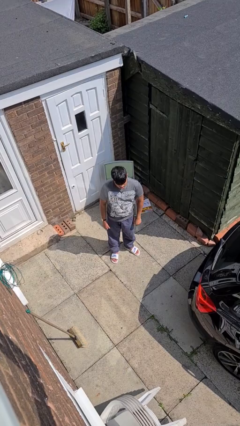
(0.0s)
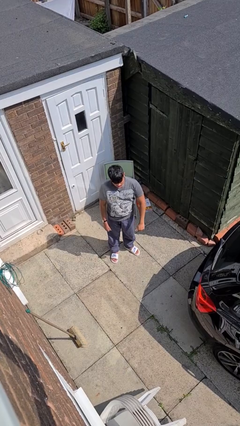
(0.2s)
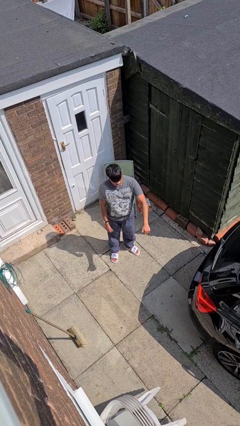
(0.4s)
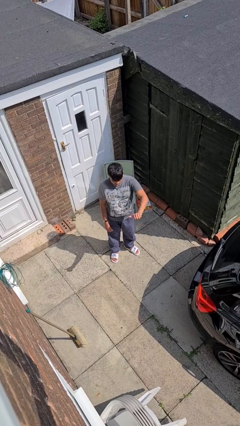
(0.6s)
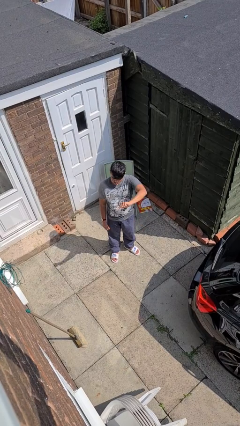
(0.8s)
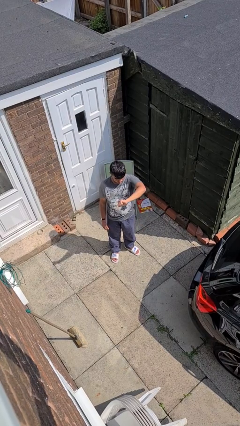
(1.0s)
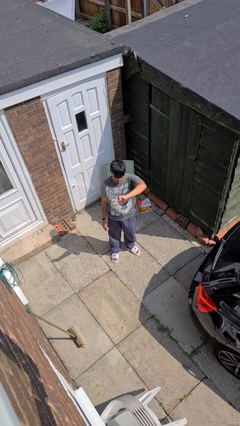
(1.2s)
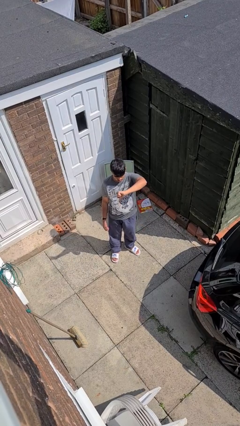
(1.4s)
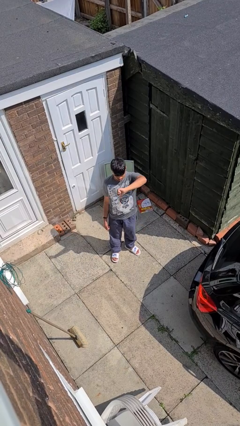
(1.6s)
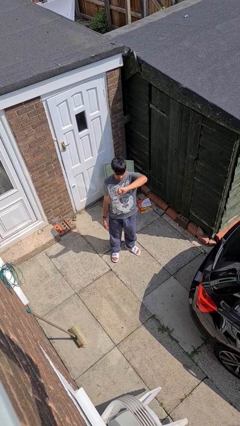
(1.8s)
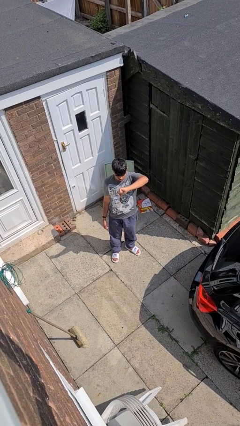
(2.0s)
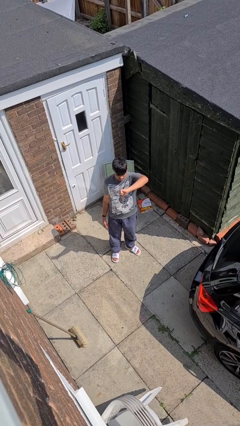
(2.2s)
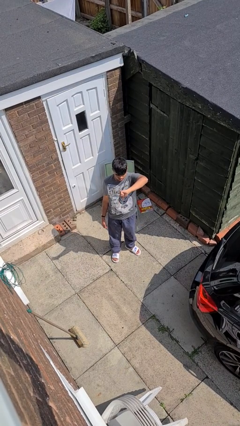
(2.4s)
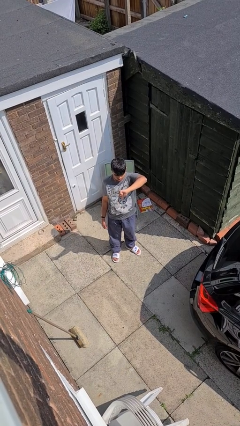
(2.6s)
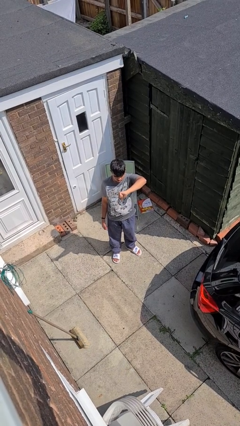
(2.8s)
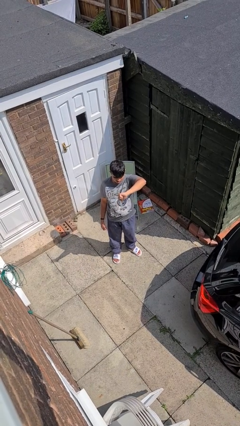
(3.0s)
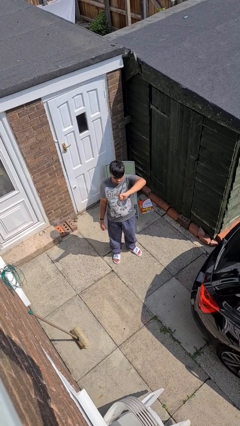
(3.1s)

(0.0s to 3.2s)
person gestures thumbs down

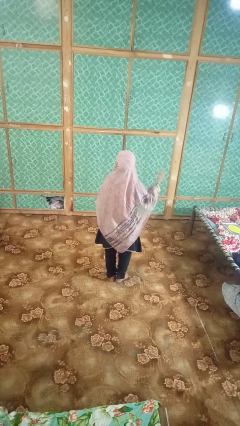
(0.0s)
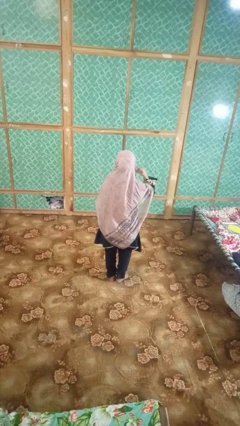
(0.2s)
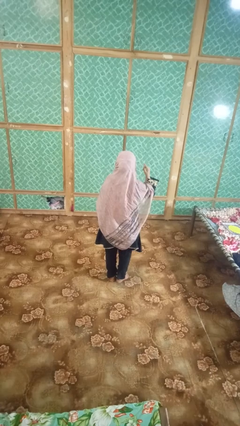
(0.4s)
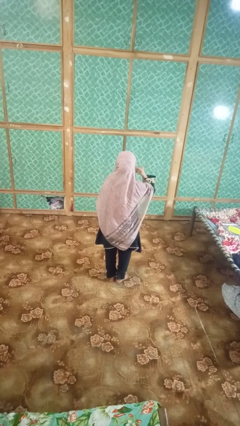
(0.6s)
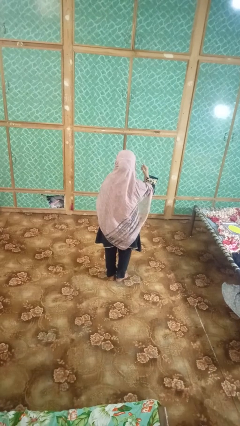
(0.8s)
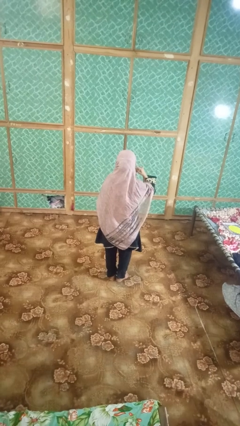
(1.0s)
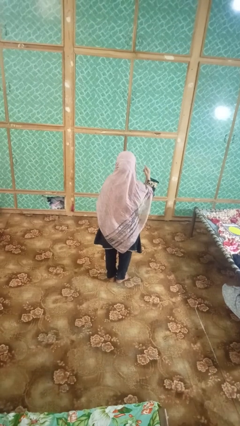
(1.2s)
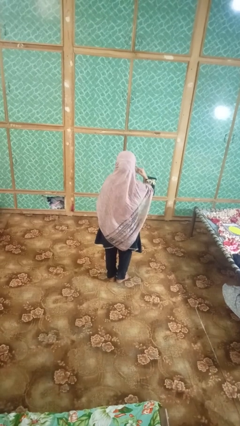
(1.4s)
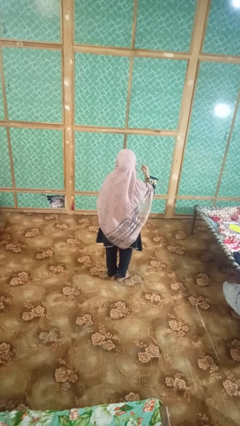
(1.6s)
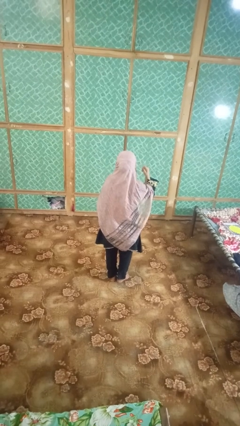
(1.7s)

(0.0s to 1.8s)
person gestures listen closely

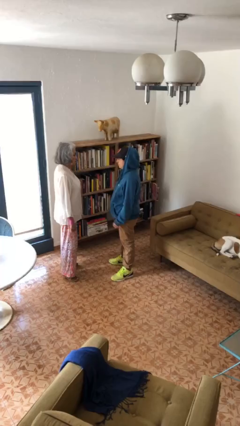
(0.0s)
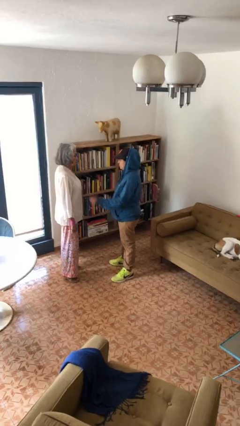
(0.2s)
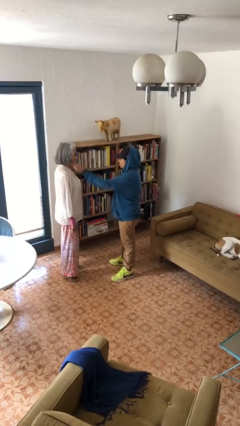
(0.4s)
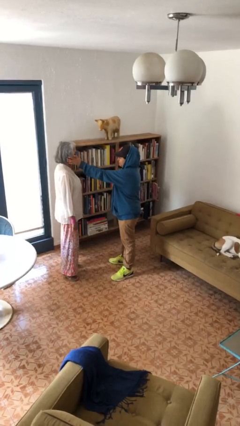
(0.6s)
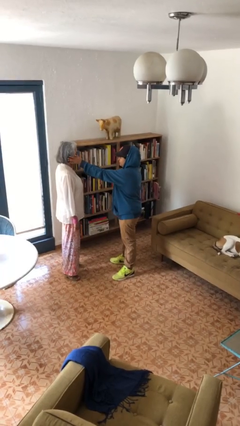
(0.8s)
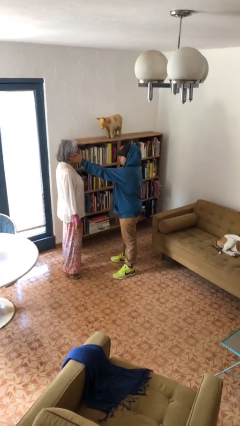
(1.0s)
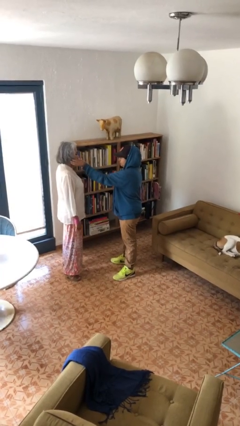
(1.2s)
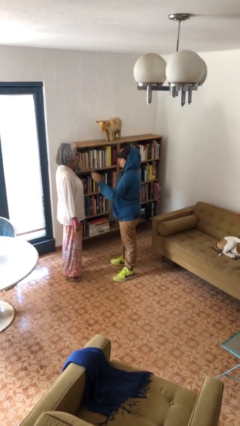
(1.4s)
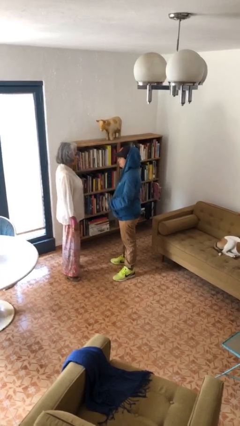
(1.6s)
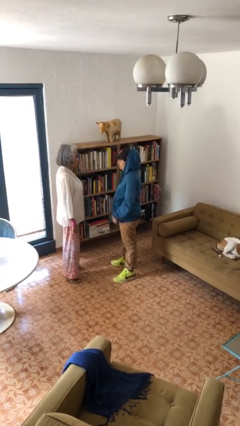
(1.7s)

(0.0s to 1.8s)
person touches face of person

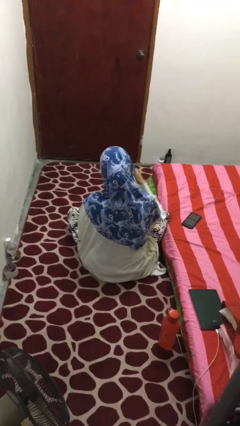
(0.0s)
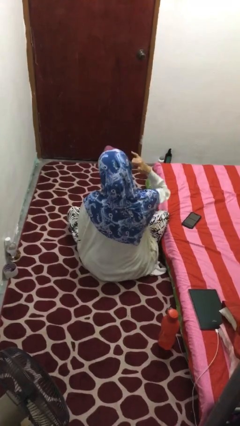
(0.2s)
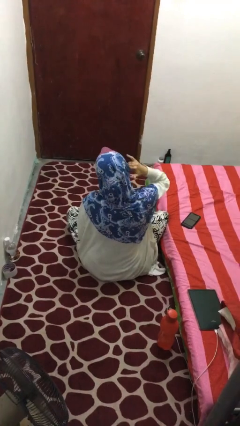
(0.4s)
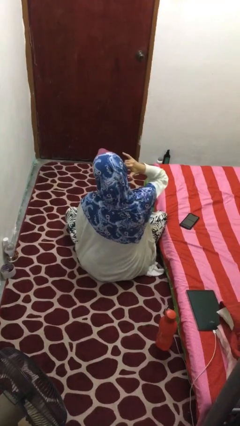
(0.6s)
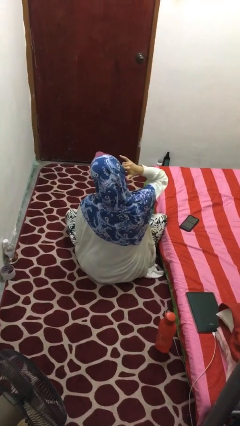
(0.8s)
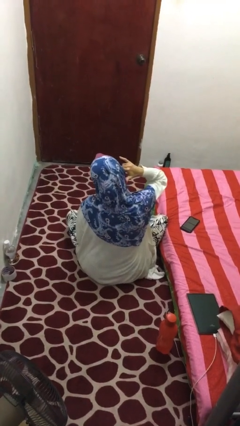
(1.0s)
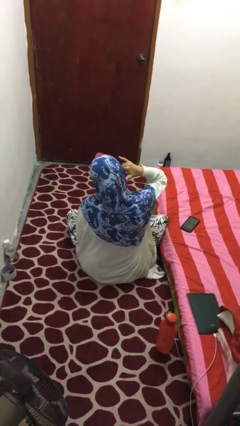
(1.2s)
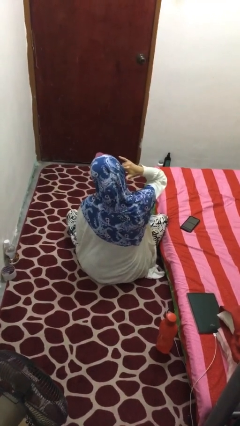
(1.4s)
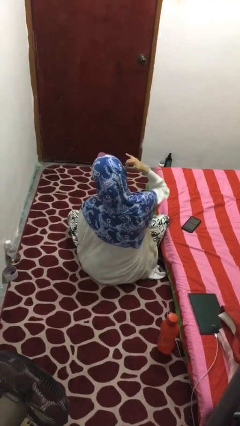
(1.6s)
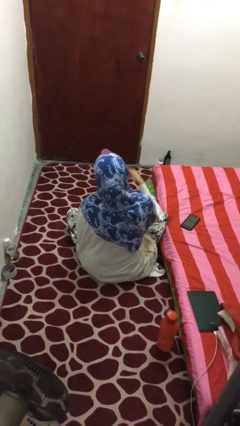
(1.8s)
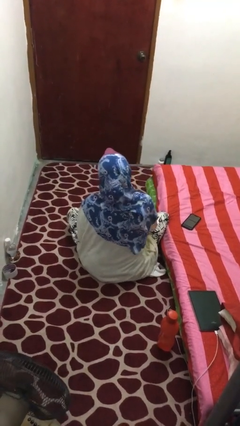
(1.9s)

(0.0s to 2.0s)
person gestures call me

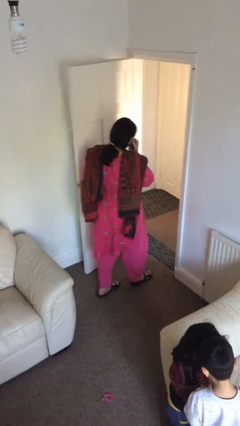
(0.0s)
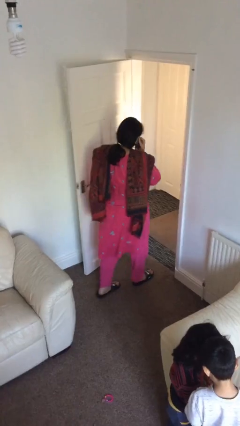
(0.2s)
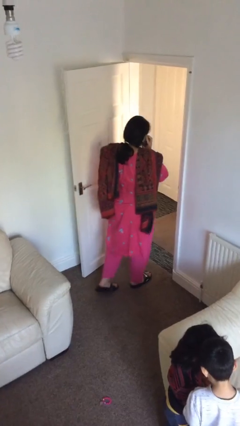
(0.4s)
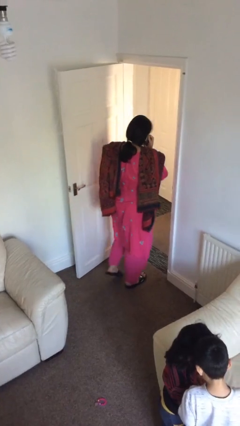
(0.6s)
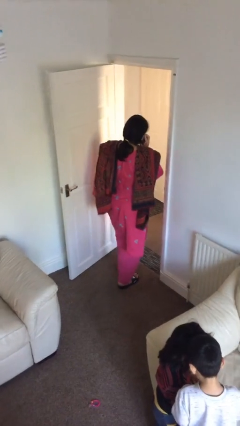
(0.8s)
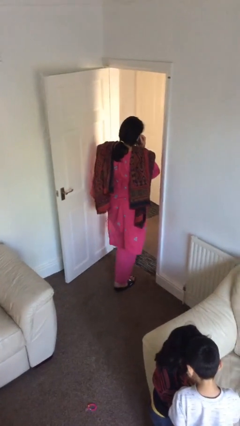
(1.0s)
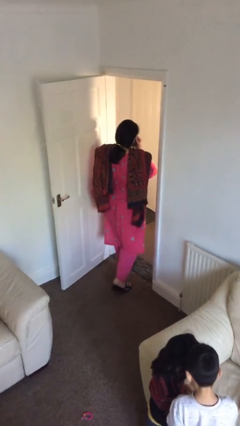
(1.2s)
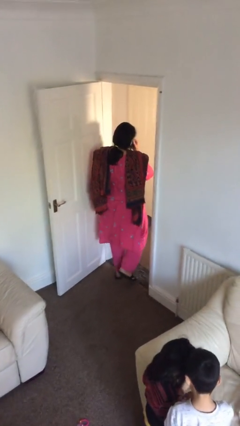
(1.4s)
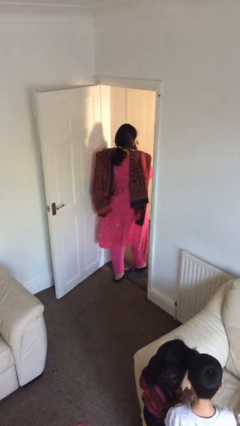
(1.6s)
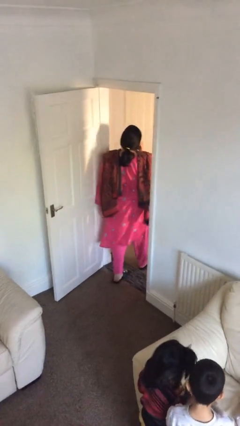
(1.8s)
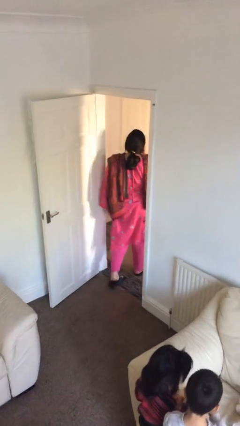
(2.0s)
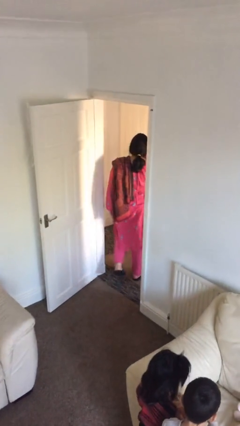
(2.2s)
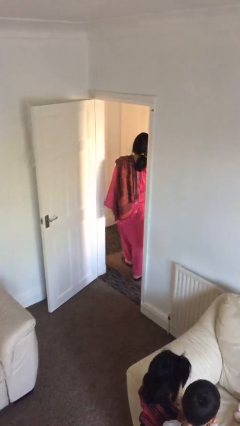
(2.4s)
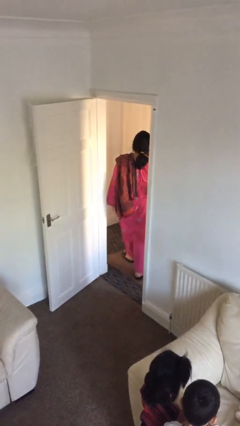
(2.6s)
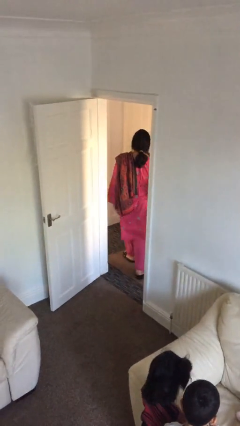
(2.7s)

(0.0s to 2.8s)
person exits scene through structure

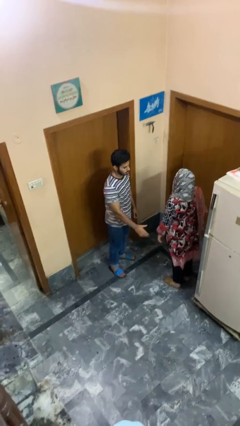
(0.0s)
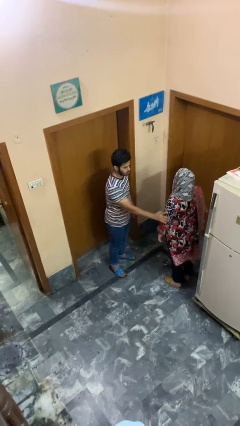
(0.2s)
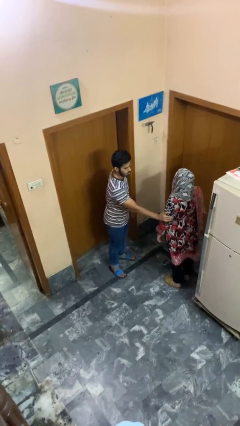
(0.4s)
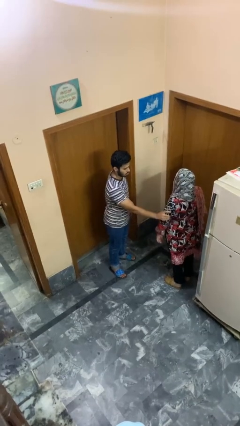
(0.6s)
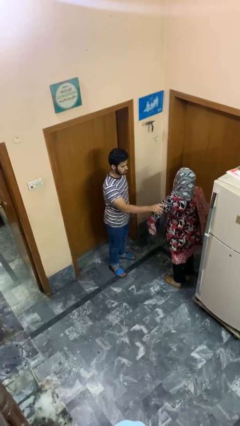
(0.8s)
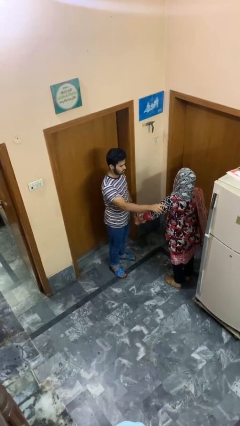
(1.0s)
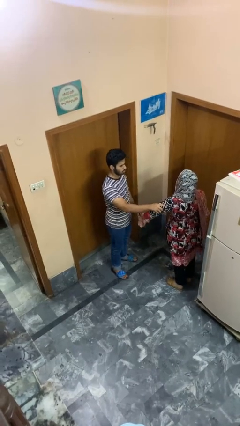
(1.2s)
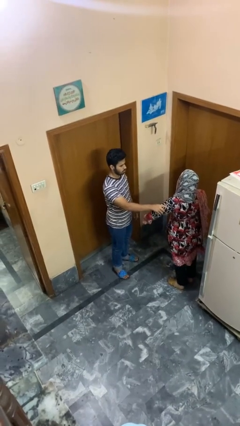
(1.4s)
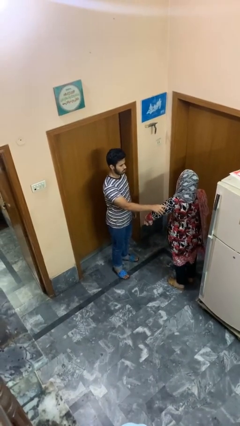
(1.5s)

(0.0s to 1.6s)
person grabs person by bicep

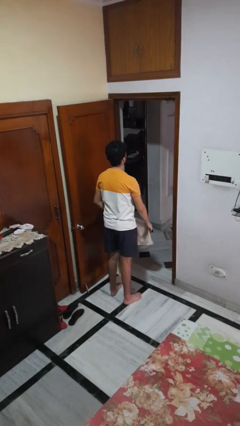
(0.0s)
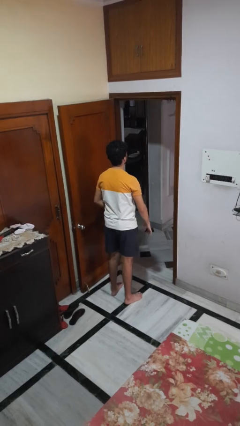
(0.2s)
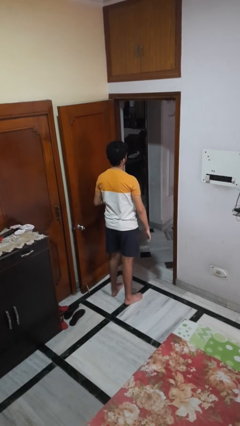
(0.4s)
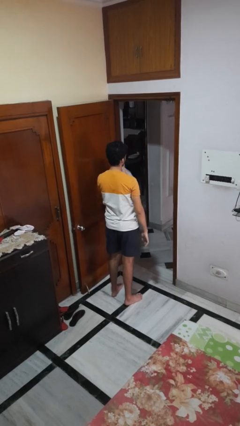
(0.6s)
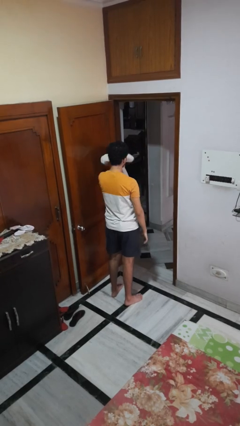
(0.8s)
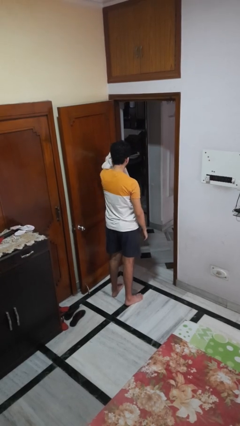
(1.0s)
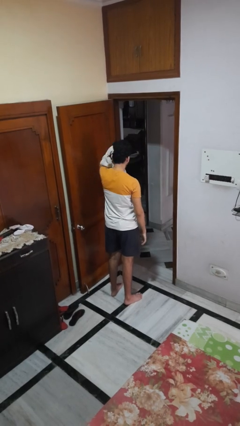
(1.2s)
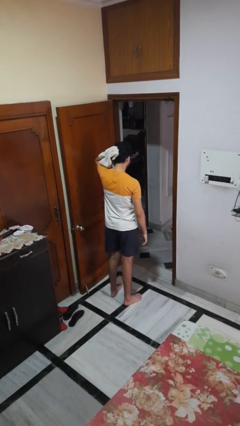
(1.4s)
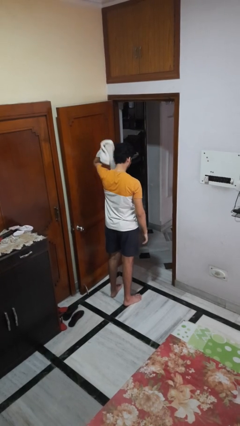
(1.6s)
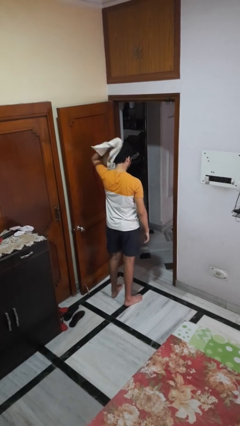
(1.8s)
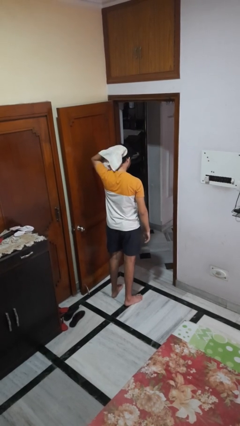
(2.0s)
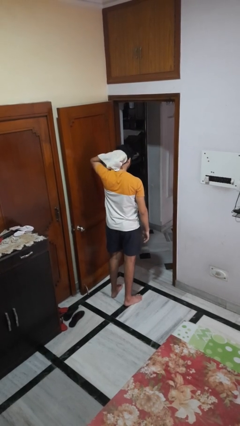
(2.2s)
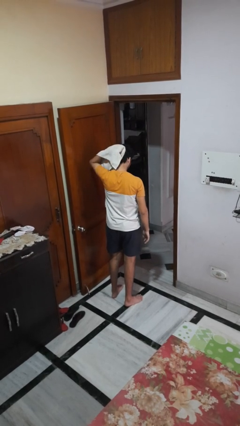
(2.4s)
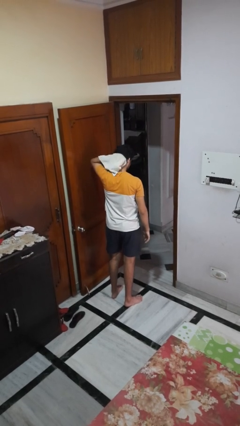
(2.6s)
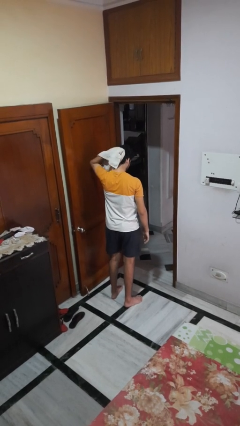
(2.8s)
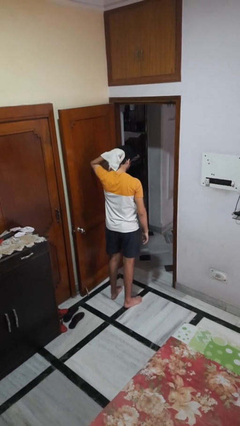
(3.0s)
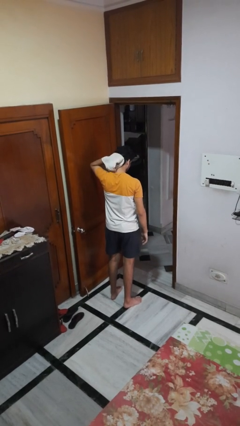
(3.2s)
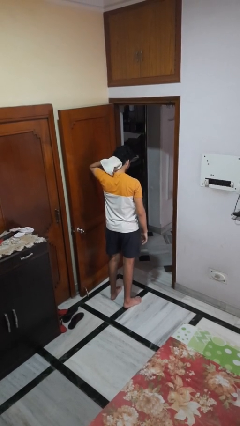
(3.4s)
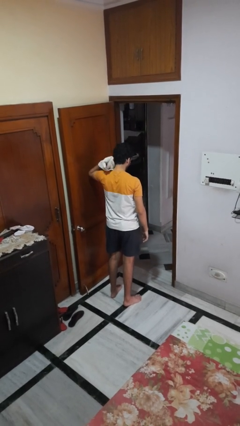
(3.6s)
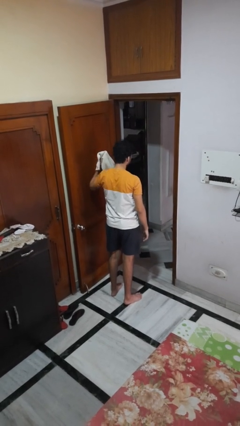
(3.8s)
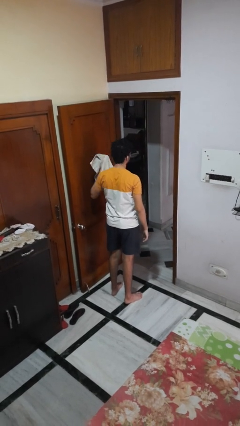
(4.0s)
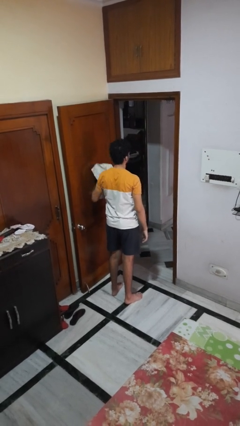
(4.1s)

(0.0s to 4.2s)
person dries hair with towel
